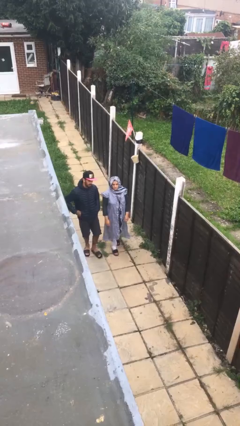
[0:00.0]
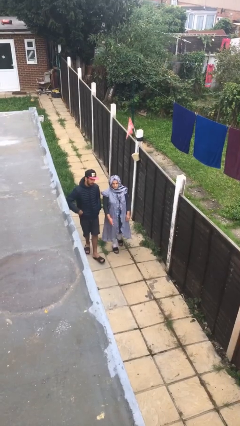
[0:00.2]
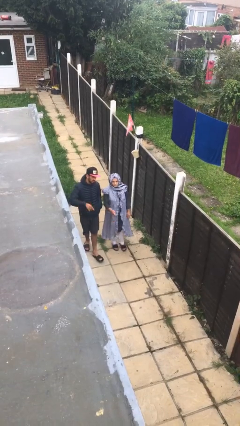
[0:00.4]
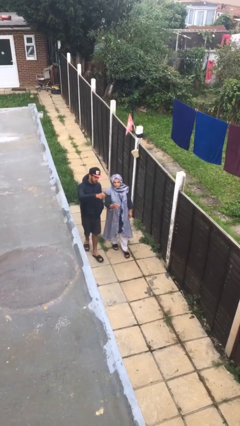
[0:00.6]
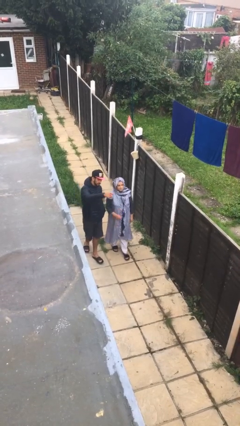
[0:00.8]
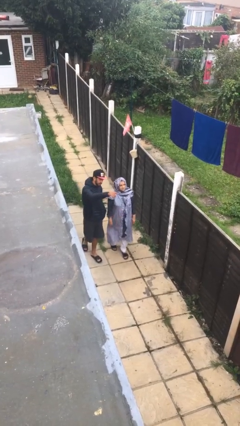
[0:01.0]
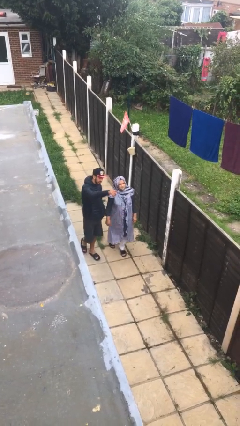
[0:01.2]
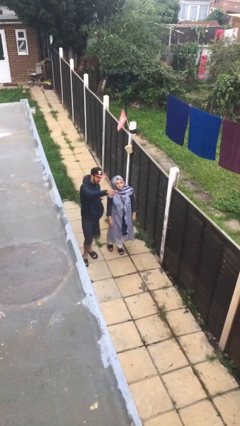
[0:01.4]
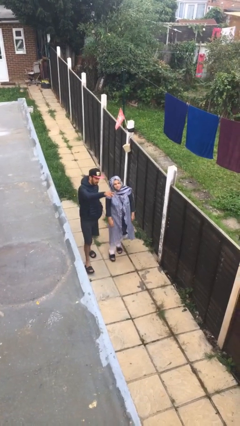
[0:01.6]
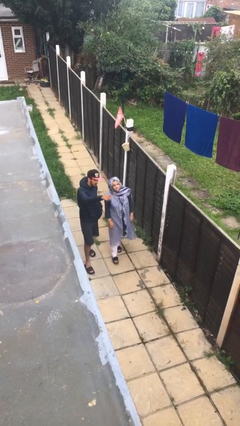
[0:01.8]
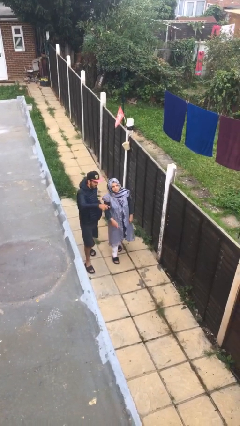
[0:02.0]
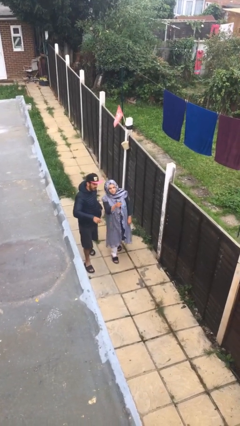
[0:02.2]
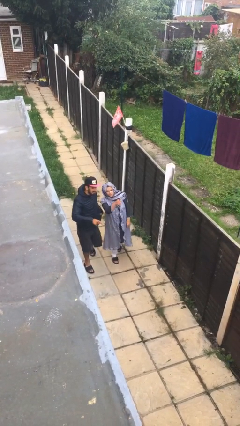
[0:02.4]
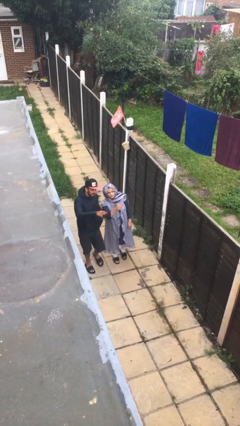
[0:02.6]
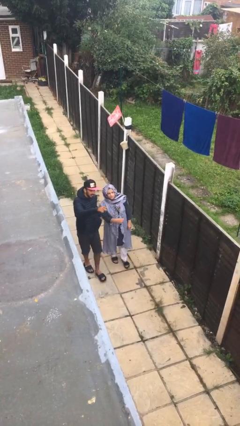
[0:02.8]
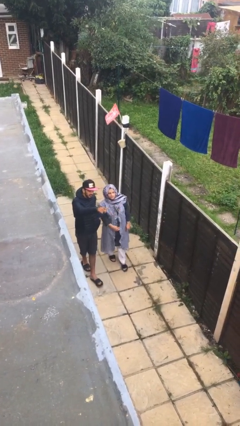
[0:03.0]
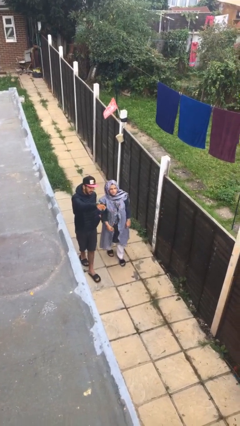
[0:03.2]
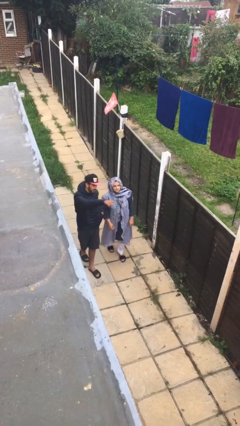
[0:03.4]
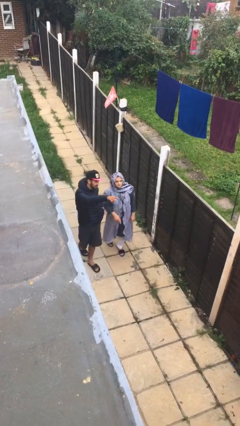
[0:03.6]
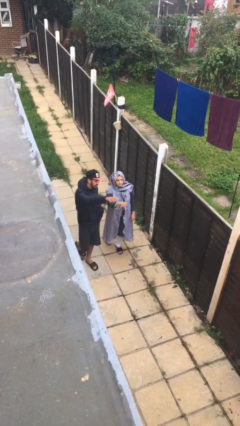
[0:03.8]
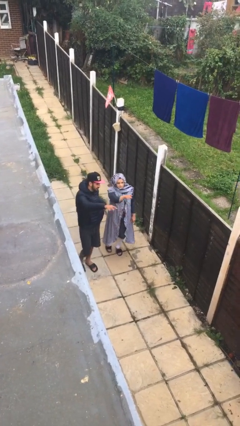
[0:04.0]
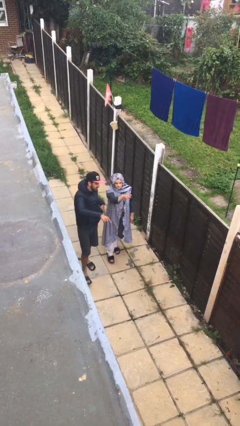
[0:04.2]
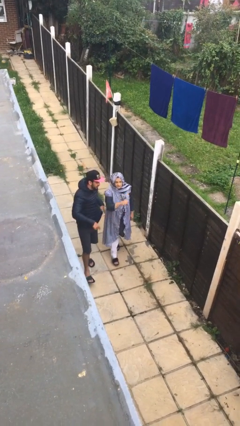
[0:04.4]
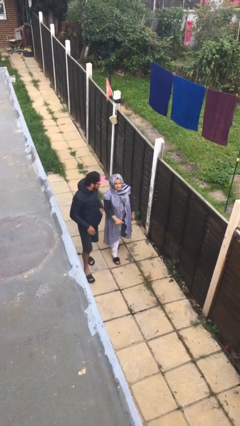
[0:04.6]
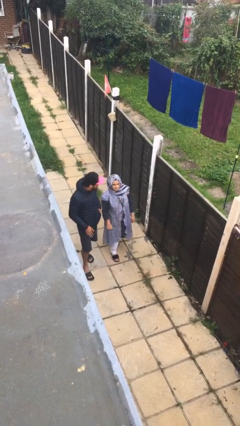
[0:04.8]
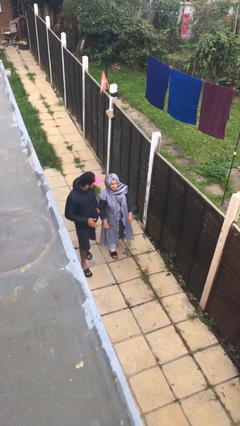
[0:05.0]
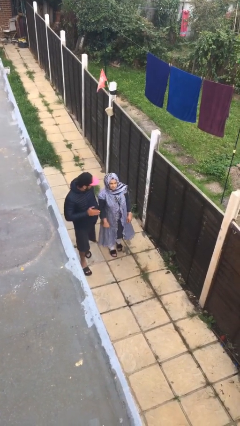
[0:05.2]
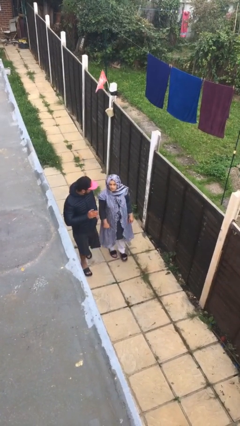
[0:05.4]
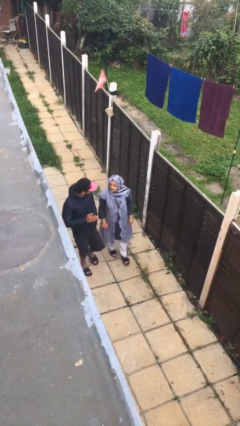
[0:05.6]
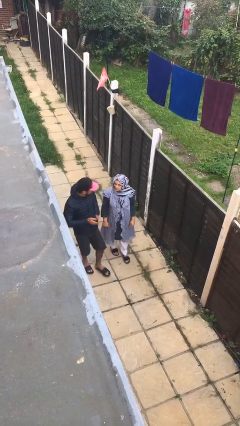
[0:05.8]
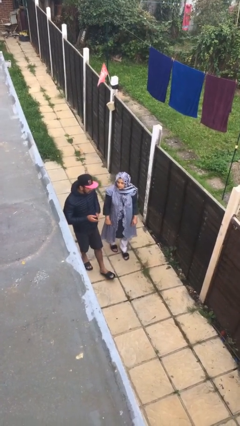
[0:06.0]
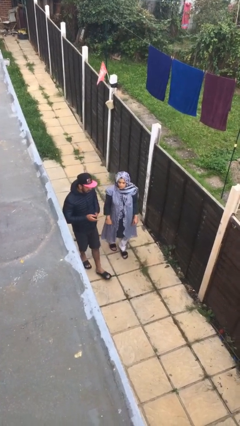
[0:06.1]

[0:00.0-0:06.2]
person talks to person

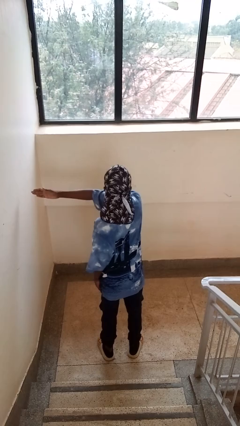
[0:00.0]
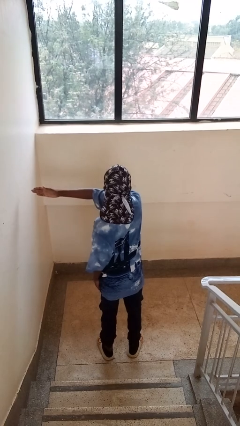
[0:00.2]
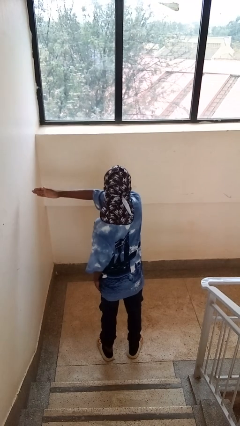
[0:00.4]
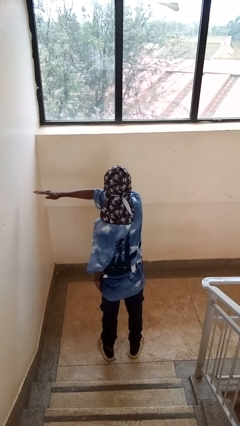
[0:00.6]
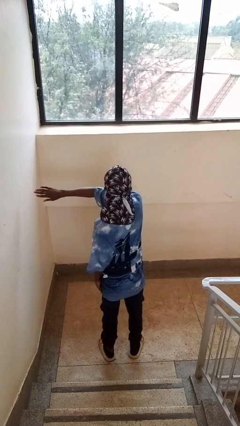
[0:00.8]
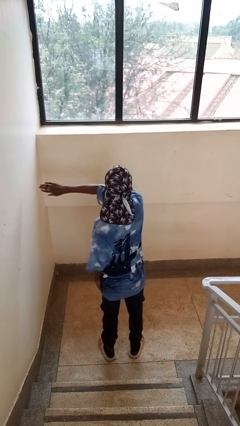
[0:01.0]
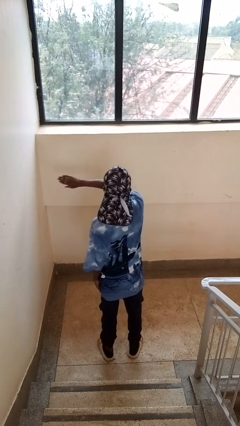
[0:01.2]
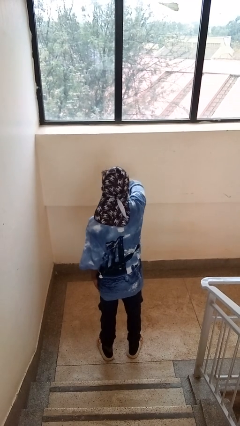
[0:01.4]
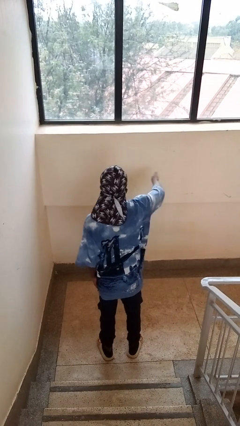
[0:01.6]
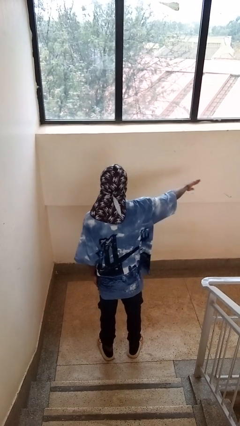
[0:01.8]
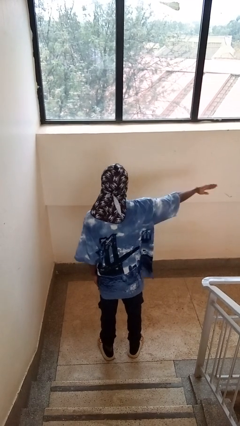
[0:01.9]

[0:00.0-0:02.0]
person gestures swipe right

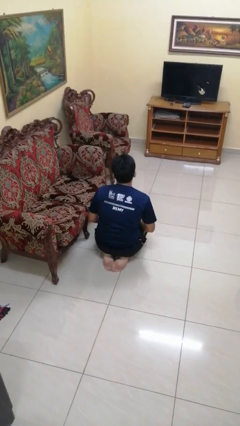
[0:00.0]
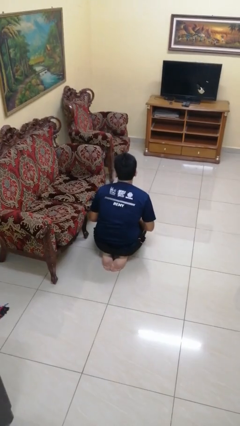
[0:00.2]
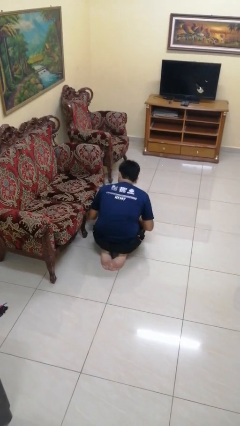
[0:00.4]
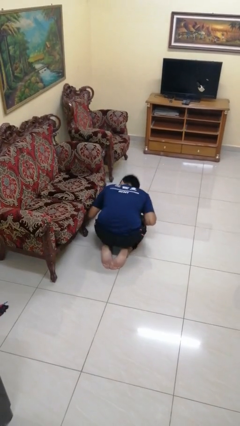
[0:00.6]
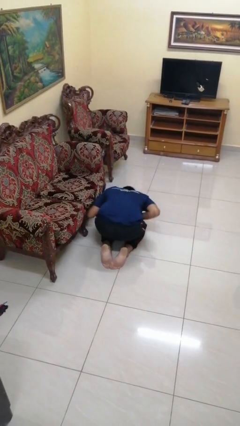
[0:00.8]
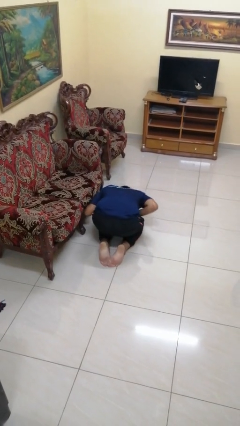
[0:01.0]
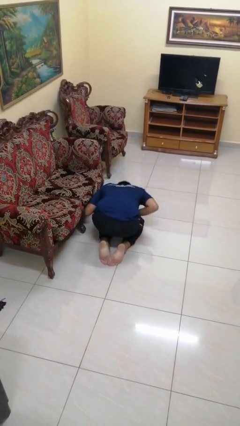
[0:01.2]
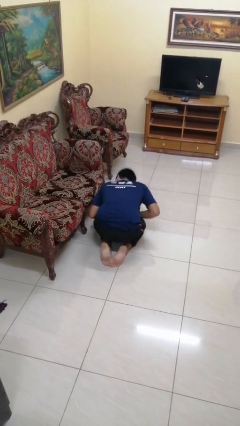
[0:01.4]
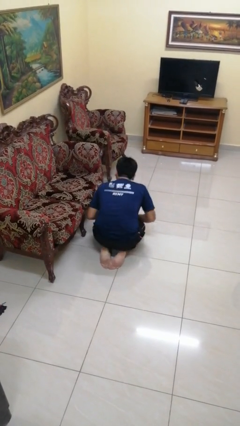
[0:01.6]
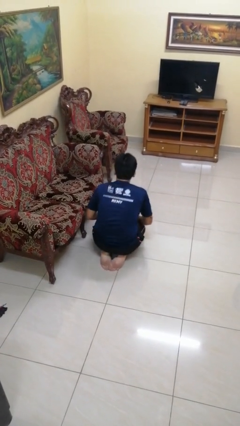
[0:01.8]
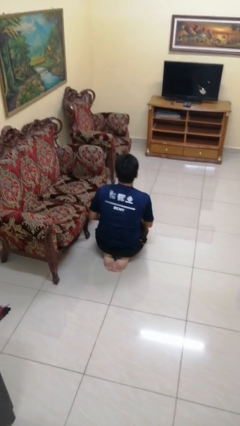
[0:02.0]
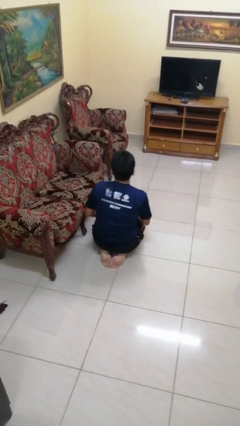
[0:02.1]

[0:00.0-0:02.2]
person searches under couch

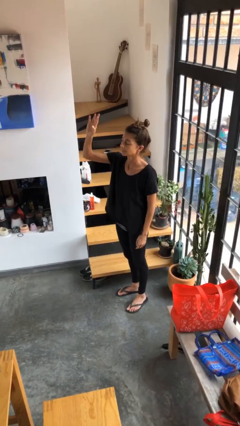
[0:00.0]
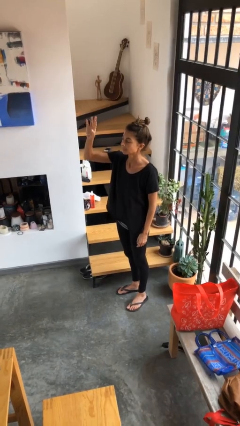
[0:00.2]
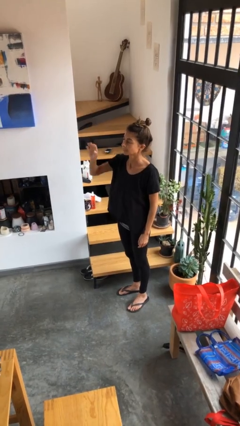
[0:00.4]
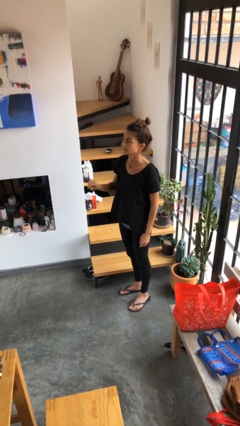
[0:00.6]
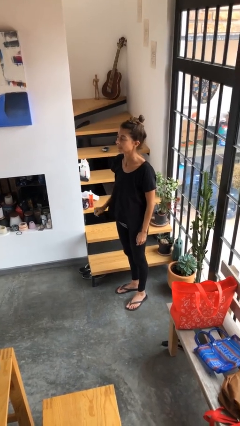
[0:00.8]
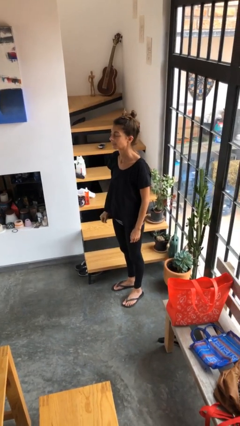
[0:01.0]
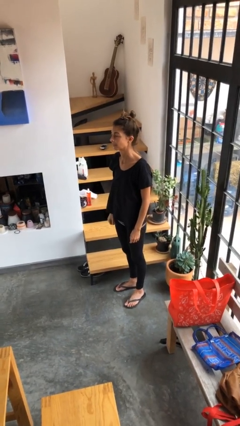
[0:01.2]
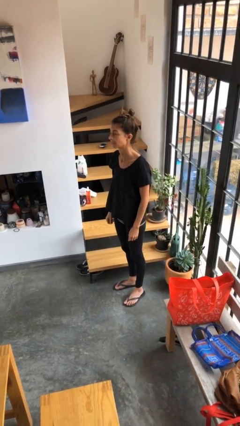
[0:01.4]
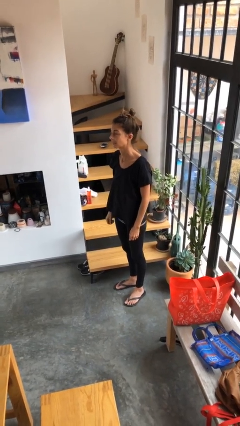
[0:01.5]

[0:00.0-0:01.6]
person gestures lower hand

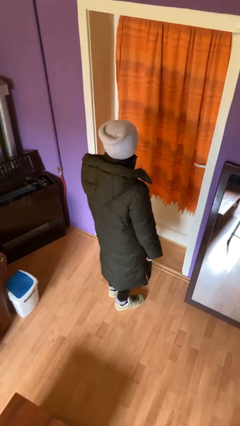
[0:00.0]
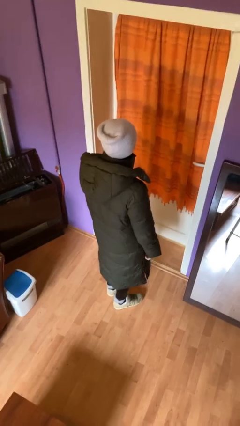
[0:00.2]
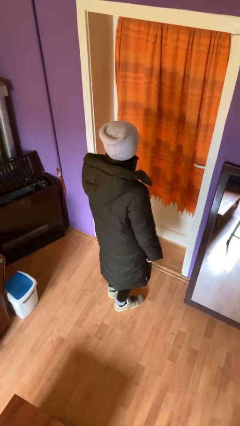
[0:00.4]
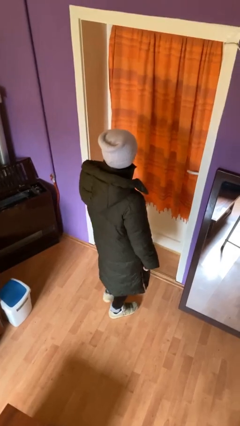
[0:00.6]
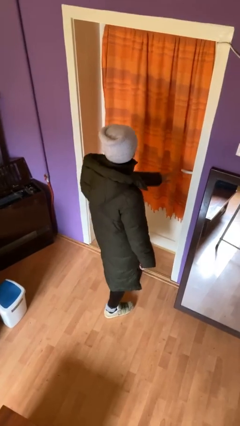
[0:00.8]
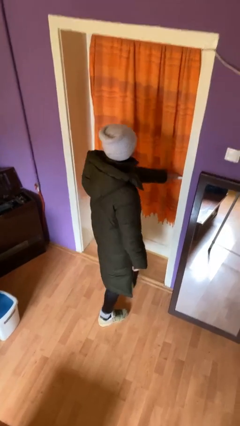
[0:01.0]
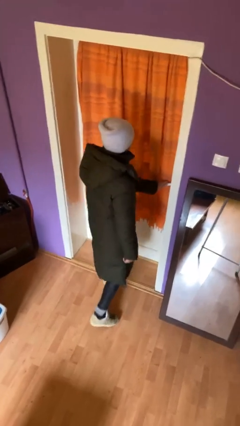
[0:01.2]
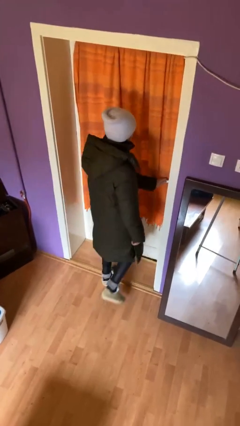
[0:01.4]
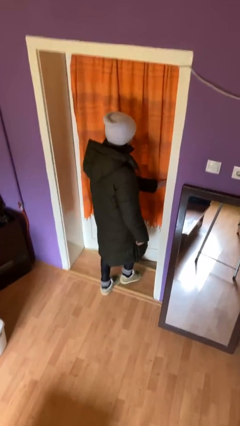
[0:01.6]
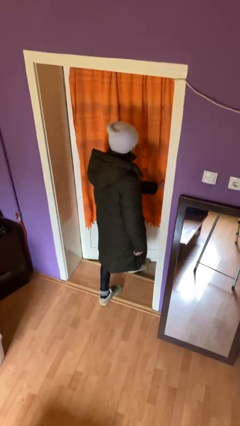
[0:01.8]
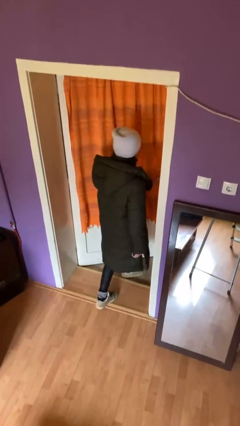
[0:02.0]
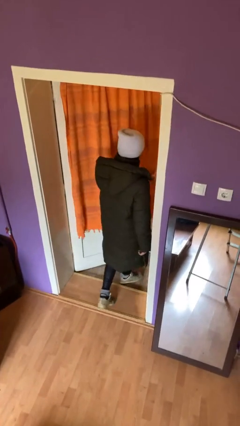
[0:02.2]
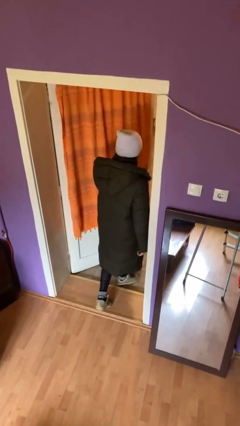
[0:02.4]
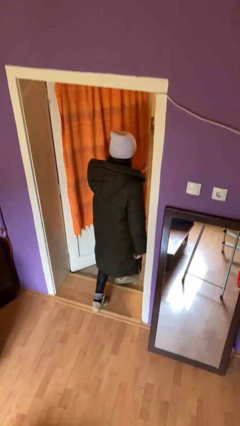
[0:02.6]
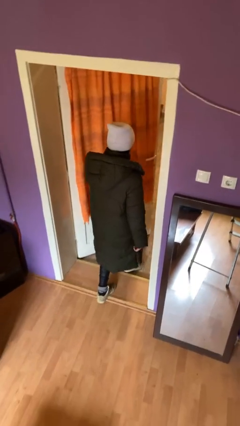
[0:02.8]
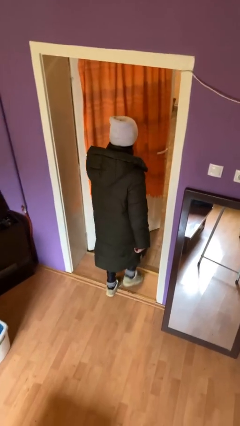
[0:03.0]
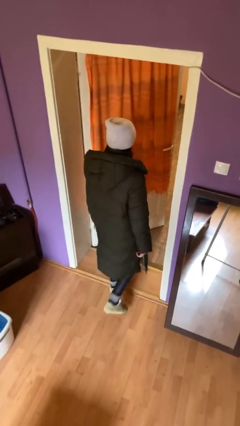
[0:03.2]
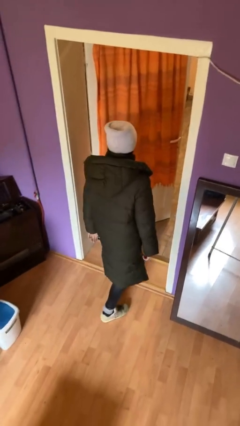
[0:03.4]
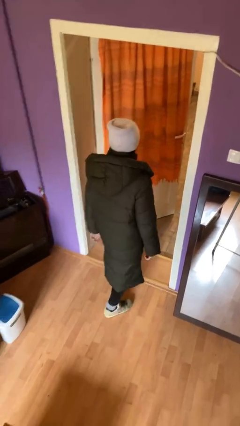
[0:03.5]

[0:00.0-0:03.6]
person opens facility door

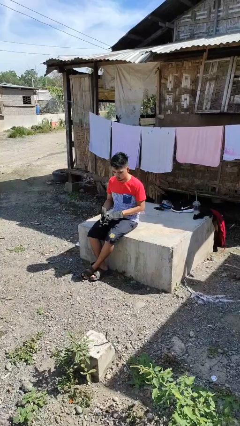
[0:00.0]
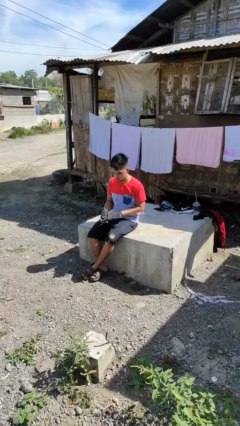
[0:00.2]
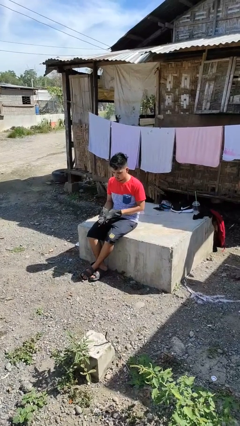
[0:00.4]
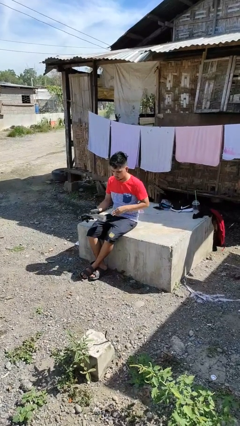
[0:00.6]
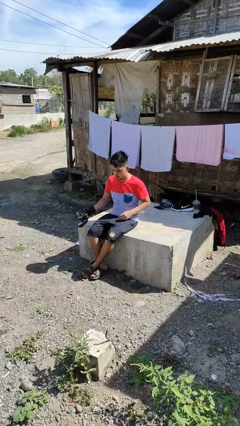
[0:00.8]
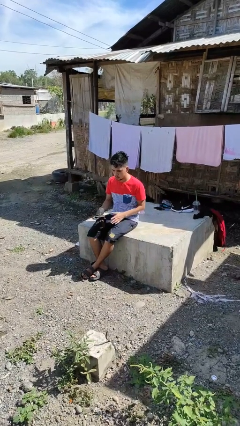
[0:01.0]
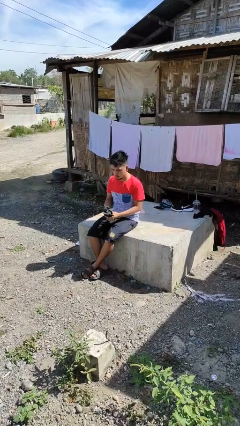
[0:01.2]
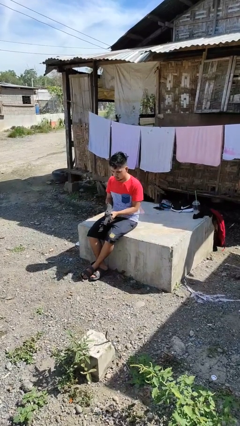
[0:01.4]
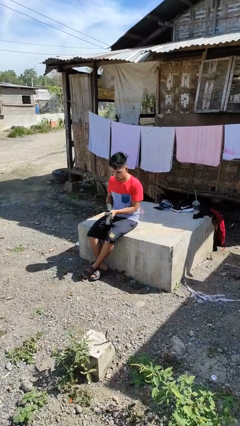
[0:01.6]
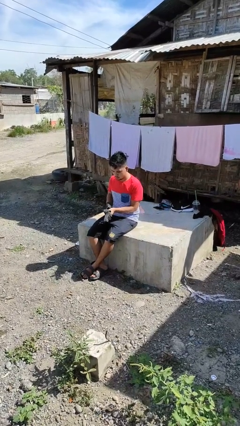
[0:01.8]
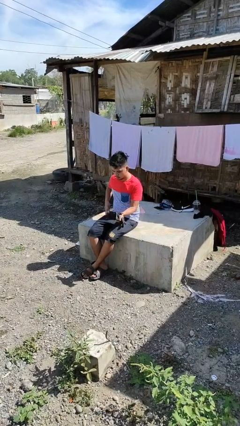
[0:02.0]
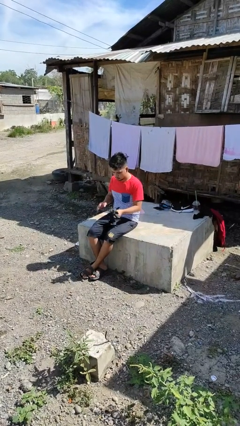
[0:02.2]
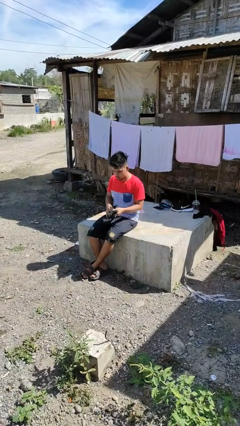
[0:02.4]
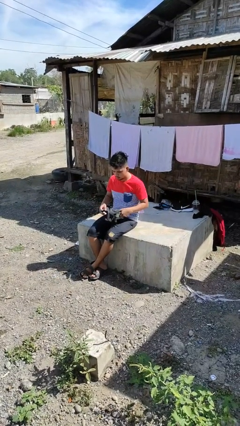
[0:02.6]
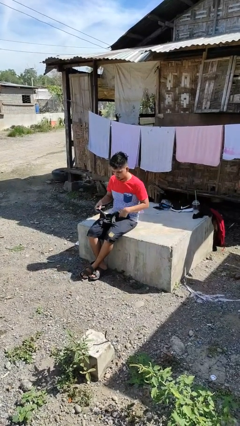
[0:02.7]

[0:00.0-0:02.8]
person takes off gloves
